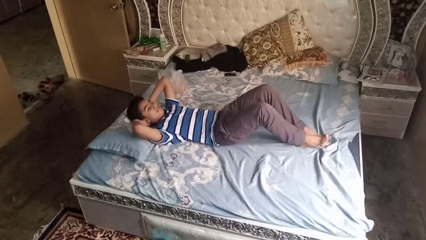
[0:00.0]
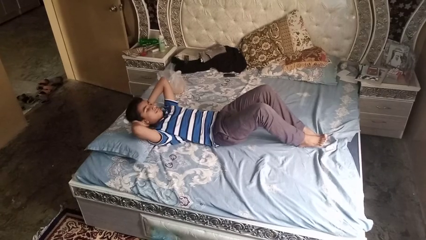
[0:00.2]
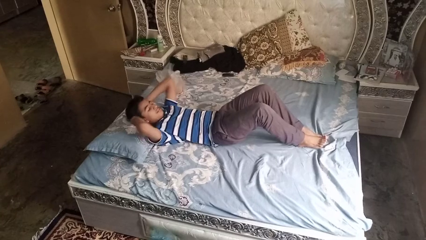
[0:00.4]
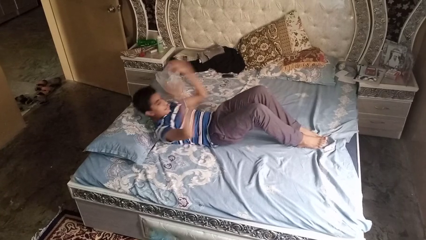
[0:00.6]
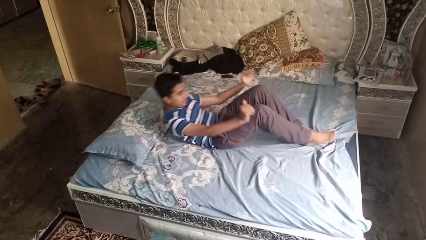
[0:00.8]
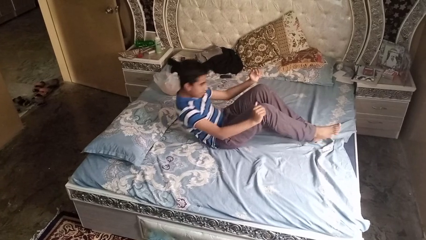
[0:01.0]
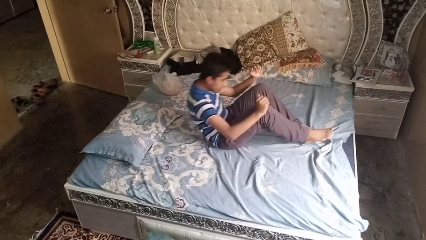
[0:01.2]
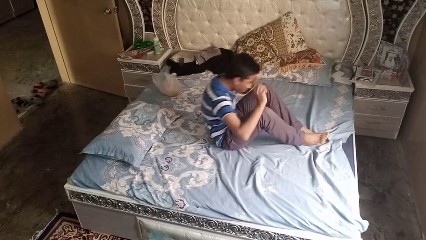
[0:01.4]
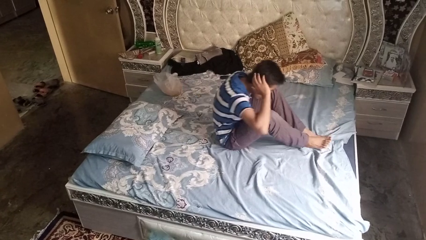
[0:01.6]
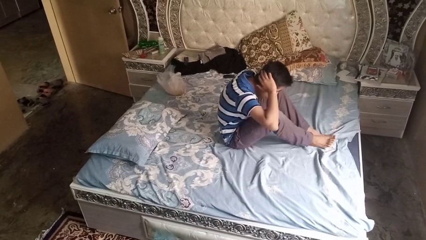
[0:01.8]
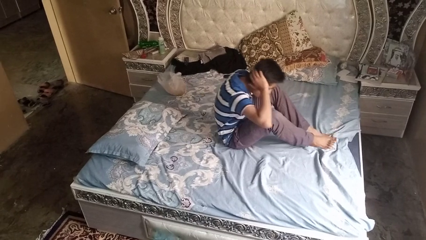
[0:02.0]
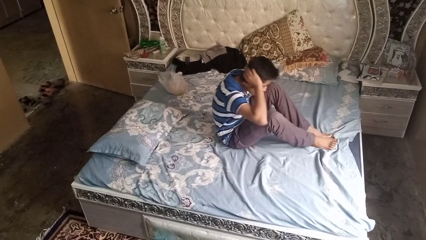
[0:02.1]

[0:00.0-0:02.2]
person exercises with situp

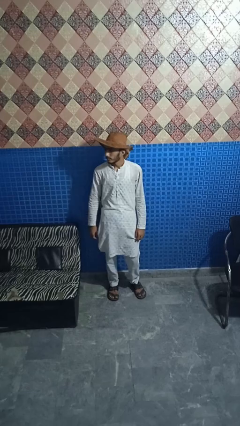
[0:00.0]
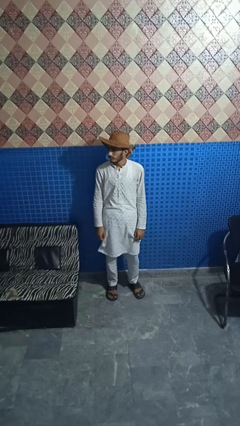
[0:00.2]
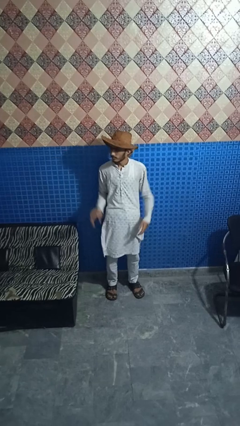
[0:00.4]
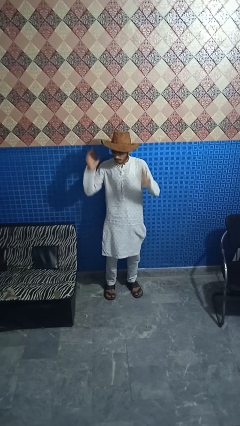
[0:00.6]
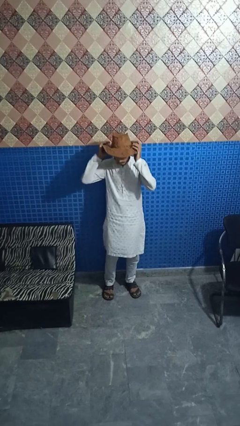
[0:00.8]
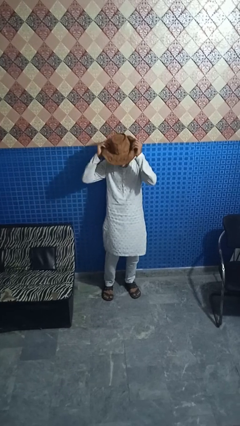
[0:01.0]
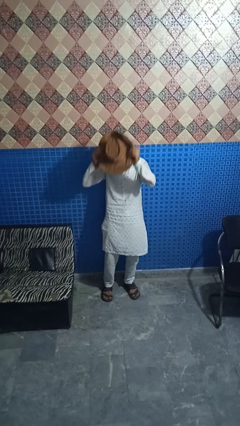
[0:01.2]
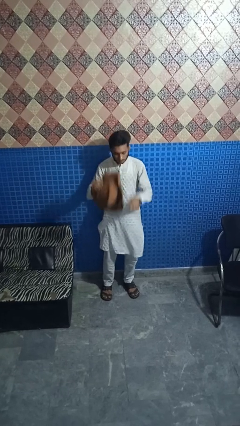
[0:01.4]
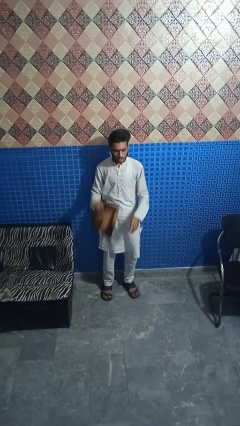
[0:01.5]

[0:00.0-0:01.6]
person takes off hat

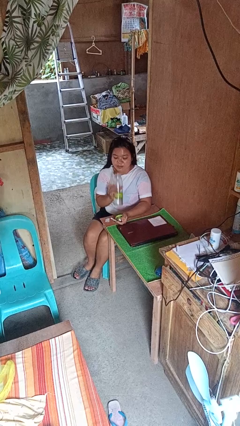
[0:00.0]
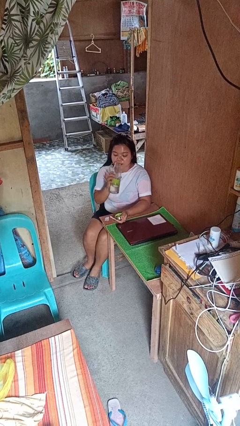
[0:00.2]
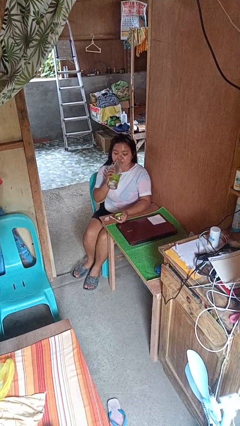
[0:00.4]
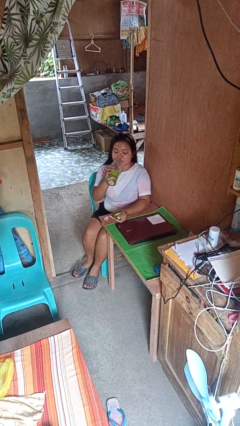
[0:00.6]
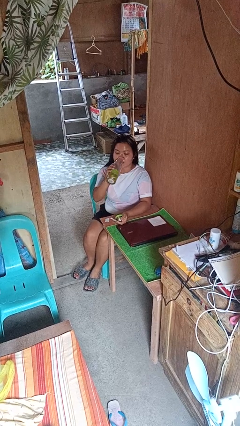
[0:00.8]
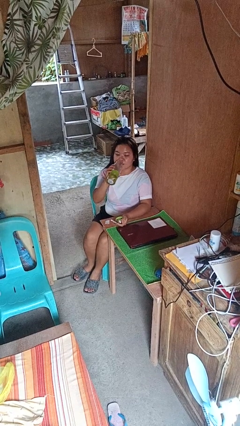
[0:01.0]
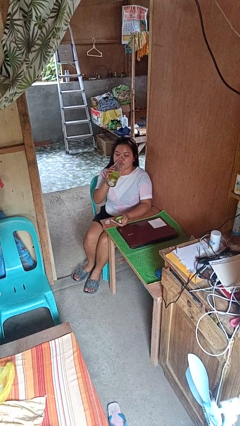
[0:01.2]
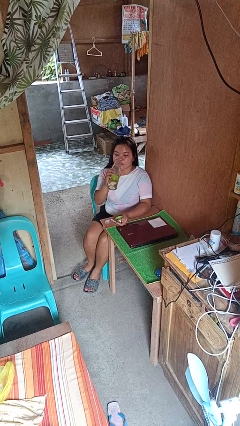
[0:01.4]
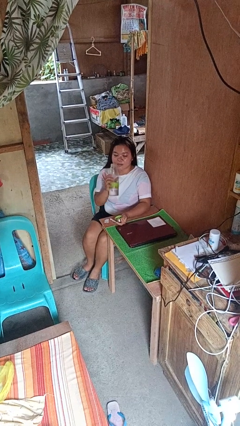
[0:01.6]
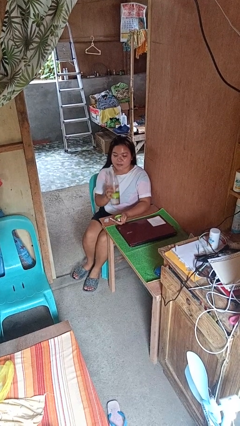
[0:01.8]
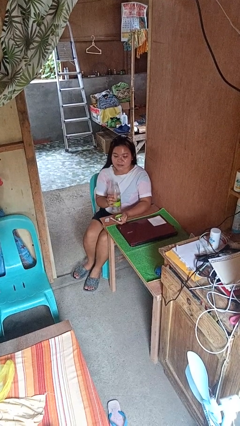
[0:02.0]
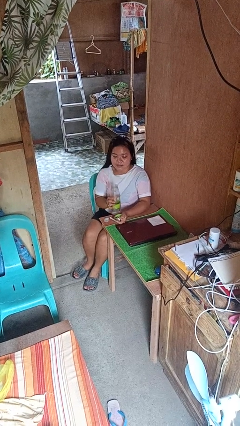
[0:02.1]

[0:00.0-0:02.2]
person drinks from bottle

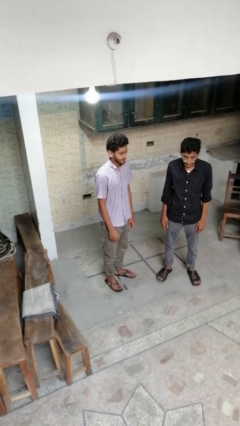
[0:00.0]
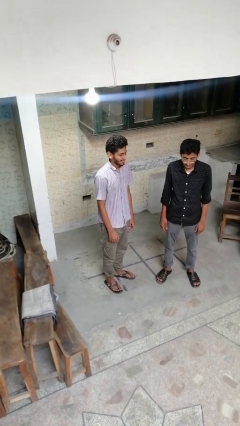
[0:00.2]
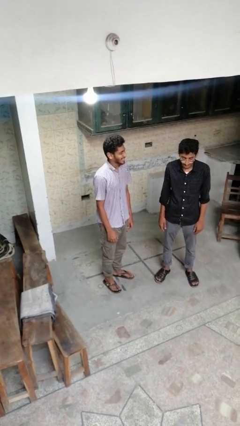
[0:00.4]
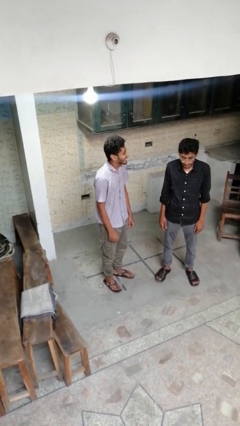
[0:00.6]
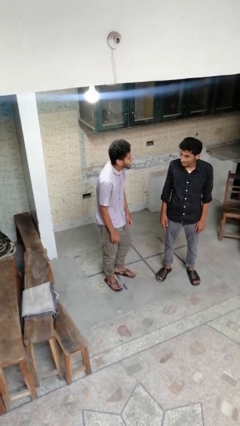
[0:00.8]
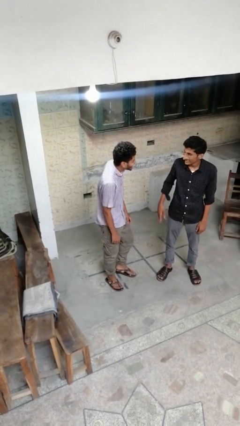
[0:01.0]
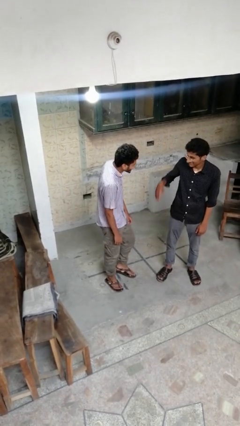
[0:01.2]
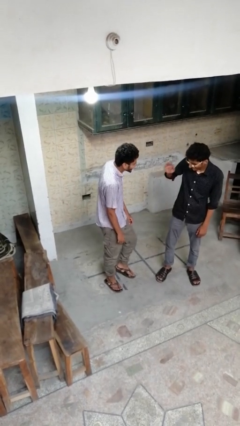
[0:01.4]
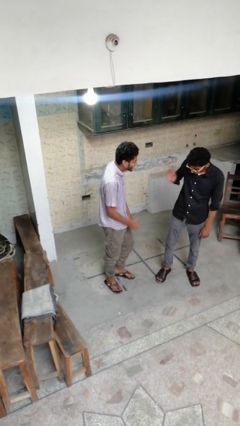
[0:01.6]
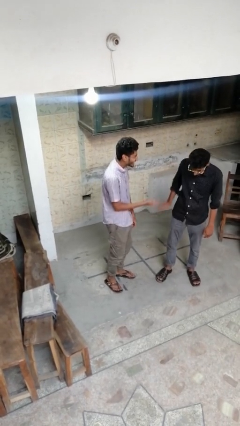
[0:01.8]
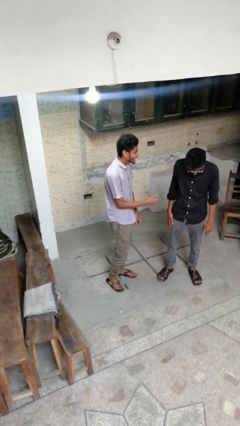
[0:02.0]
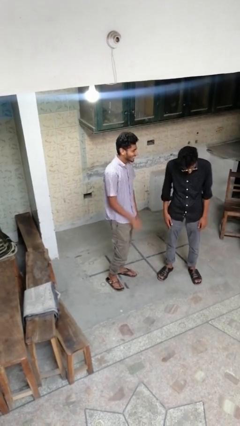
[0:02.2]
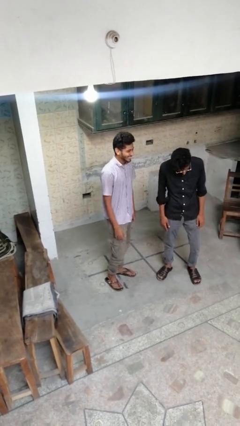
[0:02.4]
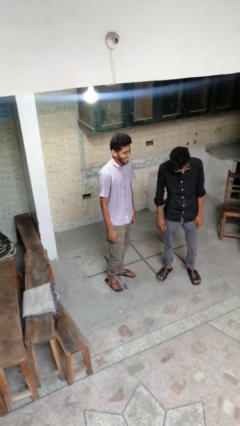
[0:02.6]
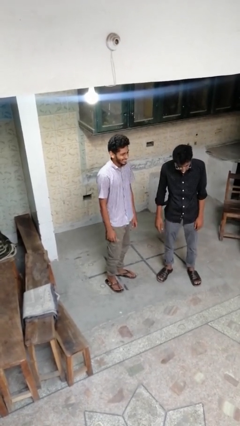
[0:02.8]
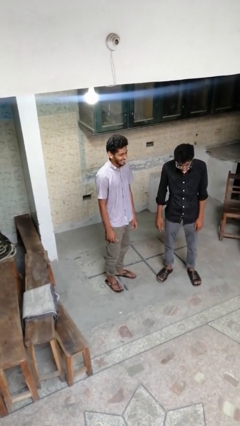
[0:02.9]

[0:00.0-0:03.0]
person laughs with person

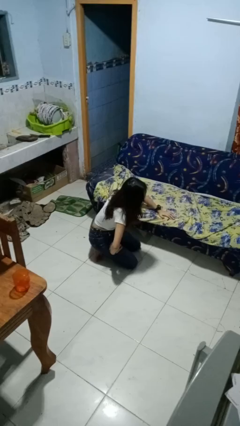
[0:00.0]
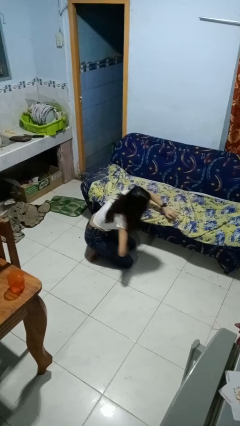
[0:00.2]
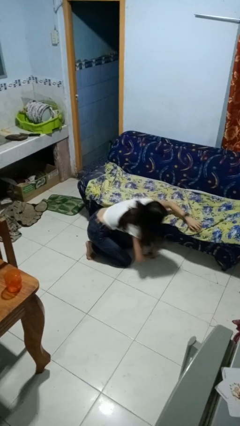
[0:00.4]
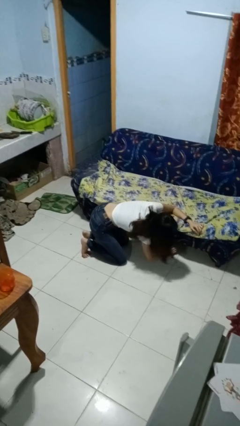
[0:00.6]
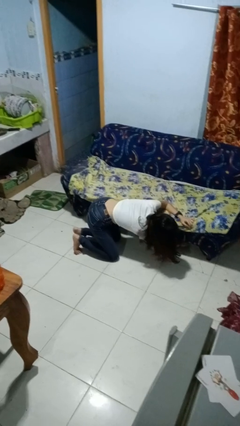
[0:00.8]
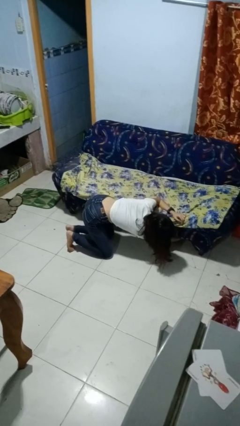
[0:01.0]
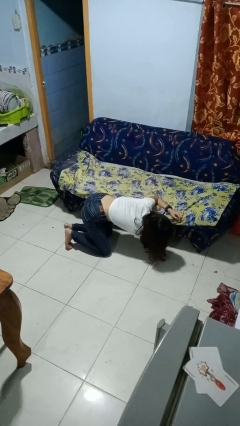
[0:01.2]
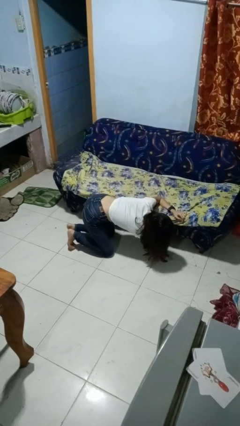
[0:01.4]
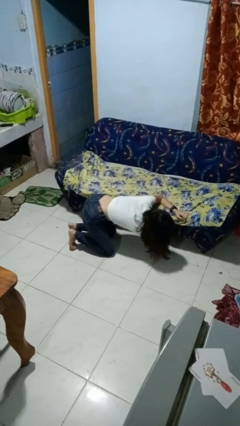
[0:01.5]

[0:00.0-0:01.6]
person searches under couch

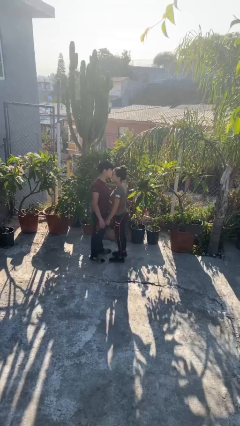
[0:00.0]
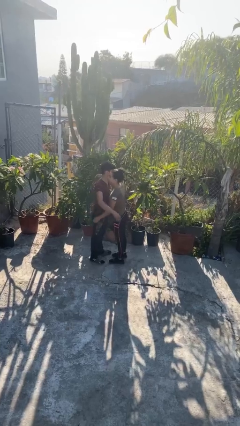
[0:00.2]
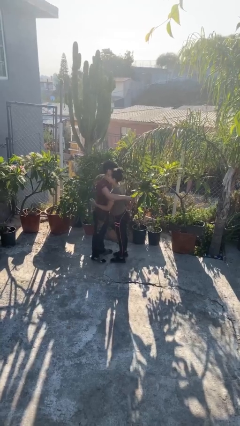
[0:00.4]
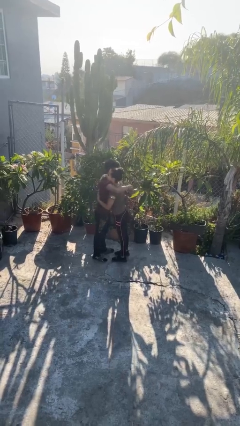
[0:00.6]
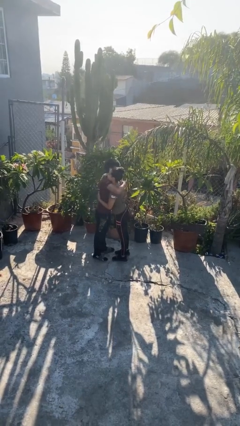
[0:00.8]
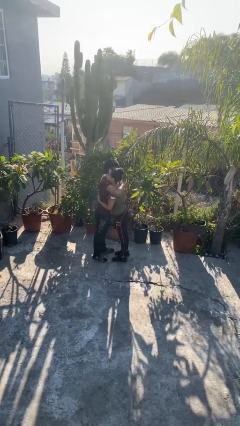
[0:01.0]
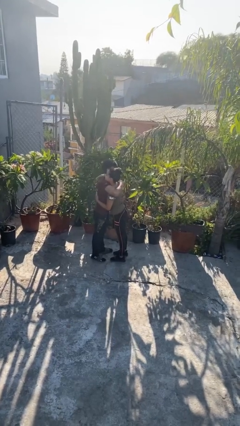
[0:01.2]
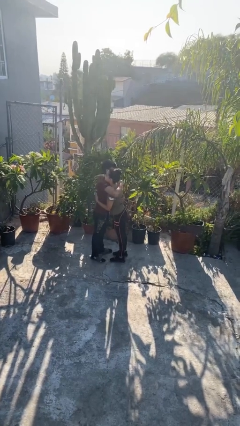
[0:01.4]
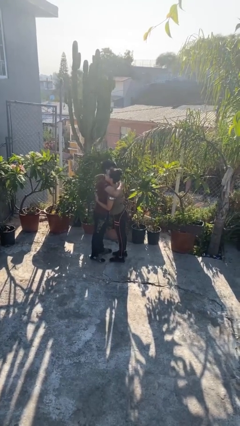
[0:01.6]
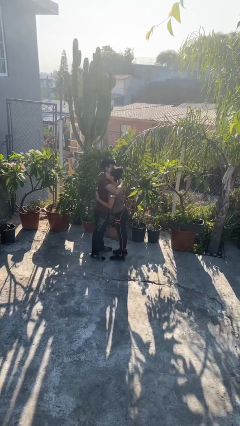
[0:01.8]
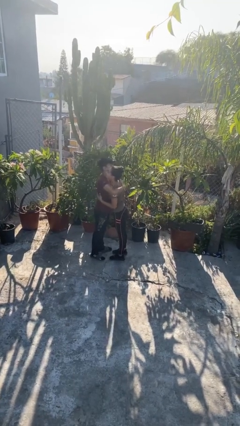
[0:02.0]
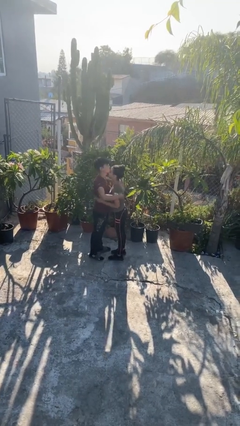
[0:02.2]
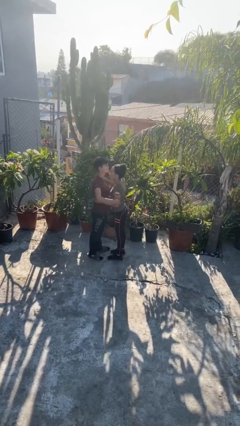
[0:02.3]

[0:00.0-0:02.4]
person embraces person

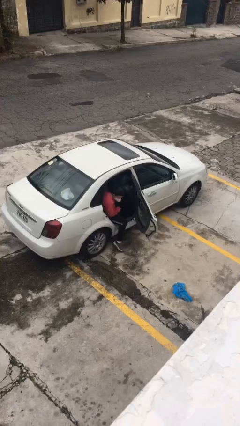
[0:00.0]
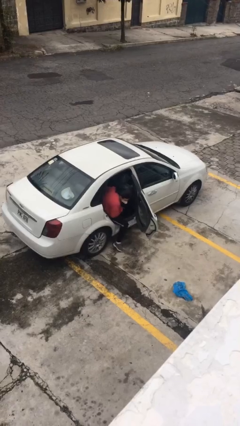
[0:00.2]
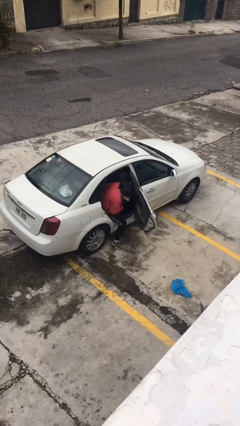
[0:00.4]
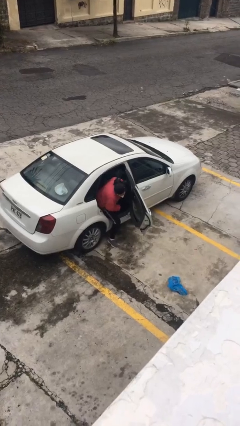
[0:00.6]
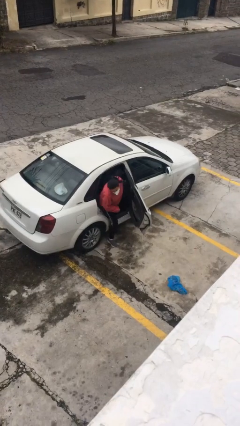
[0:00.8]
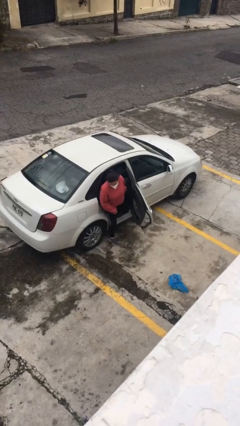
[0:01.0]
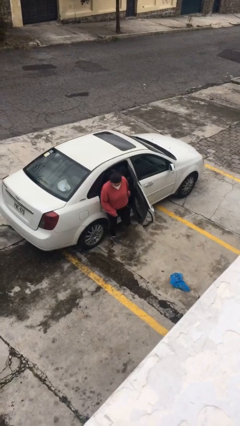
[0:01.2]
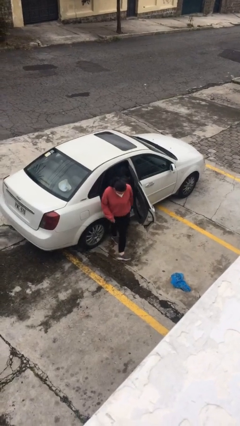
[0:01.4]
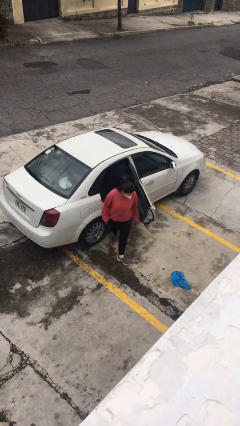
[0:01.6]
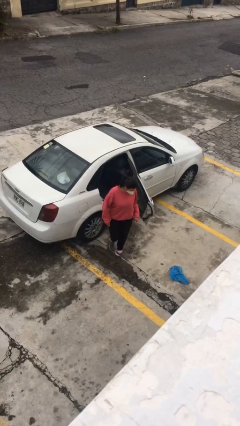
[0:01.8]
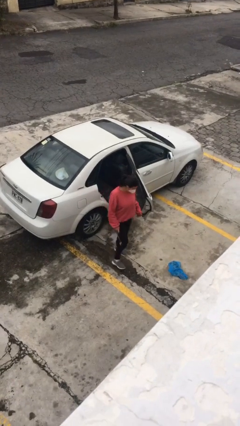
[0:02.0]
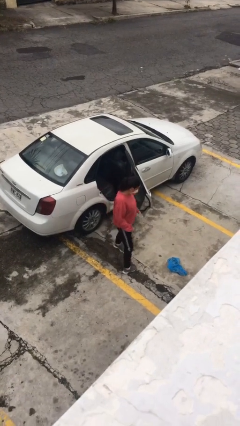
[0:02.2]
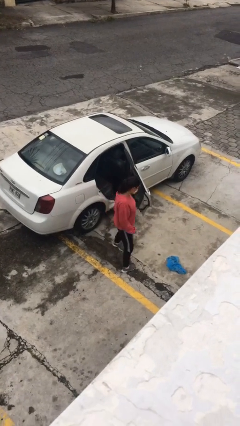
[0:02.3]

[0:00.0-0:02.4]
person exits car

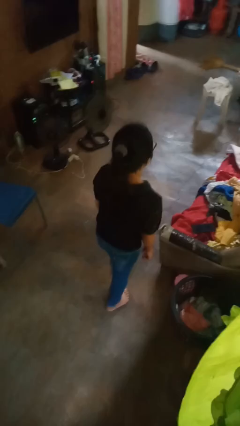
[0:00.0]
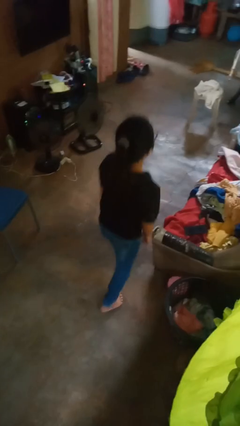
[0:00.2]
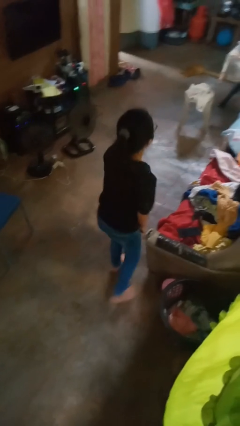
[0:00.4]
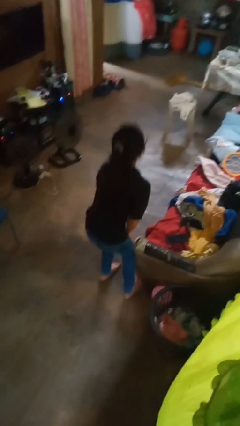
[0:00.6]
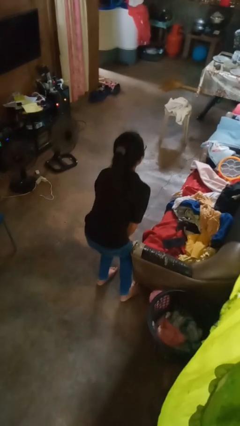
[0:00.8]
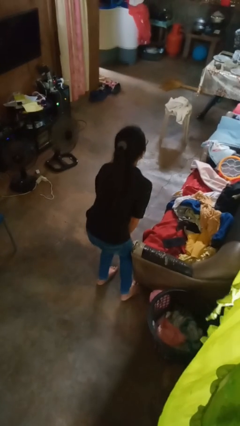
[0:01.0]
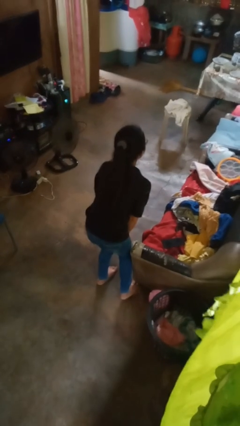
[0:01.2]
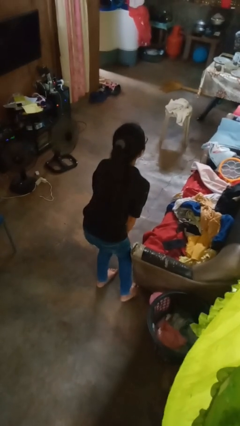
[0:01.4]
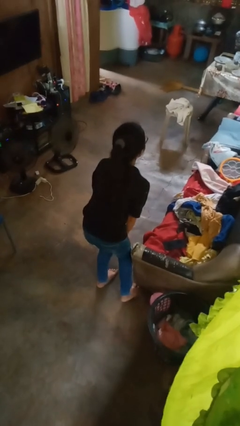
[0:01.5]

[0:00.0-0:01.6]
person stubs toe
